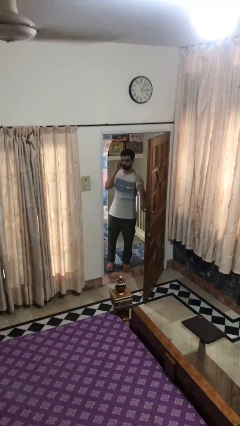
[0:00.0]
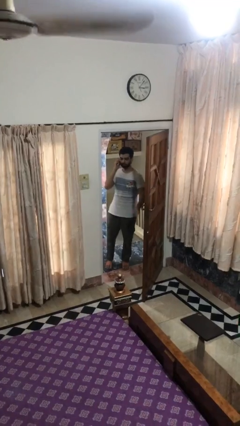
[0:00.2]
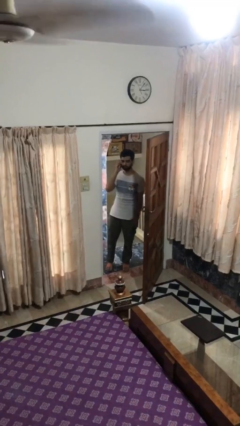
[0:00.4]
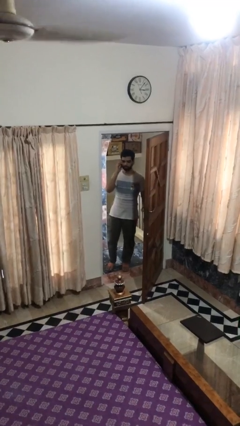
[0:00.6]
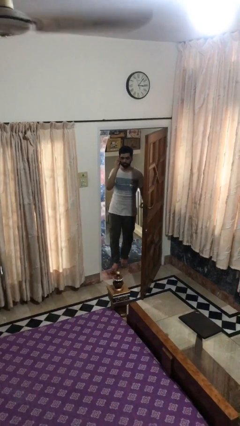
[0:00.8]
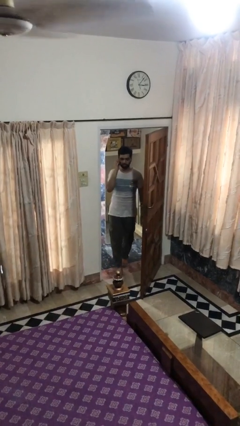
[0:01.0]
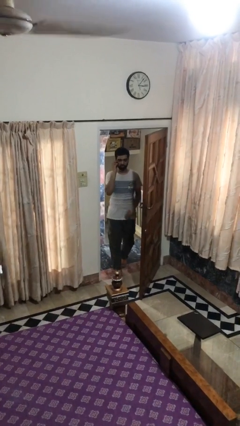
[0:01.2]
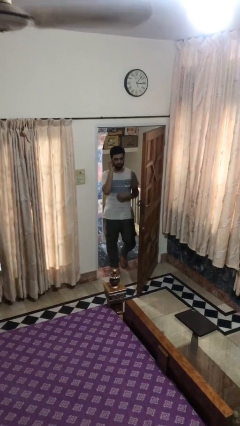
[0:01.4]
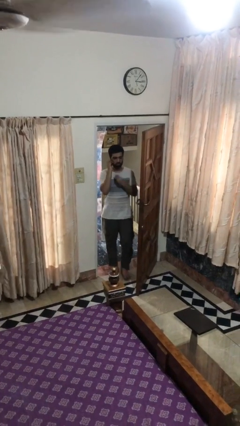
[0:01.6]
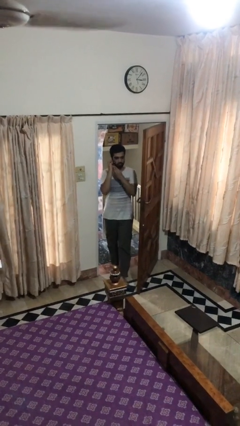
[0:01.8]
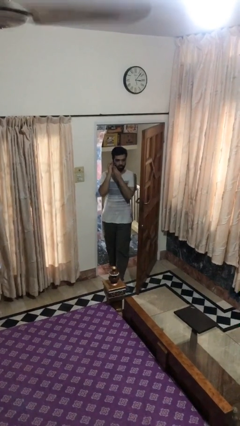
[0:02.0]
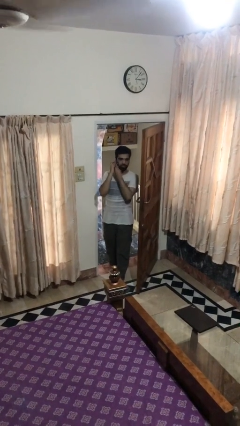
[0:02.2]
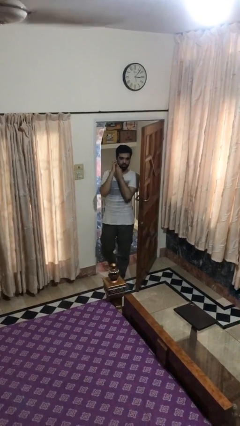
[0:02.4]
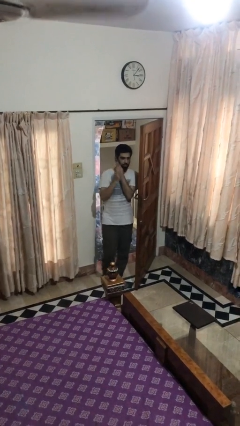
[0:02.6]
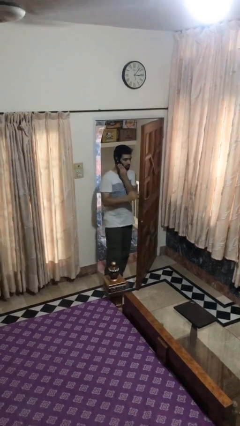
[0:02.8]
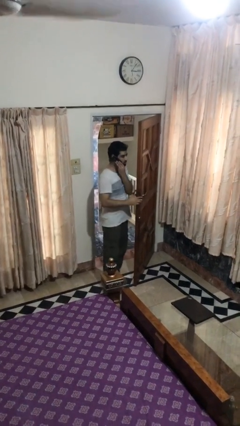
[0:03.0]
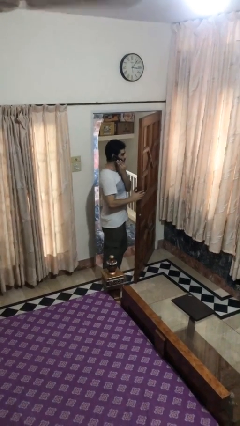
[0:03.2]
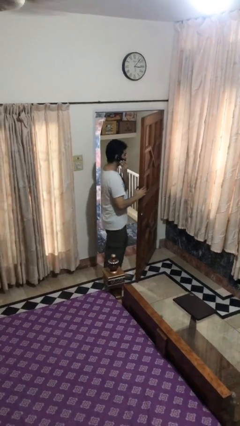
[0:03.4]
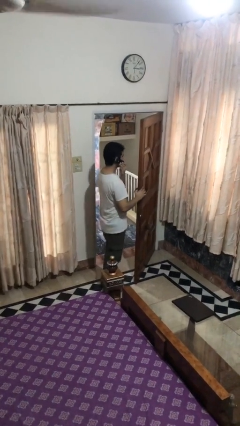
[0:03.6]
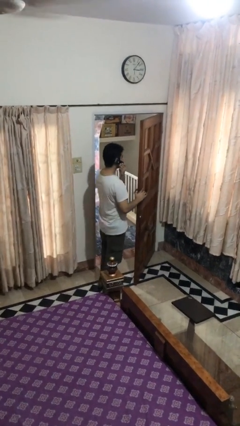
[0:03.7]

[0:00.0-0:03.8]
person enters scene through structure

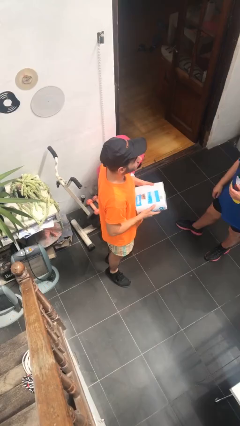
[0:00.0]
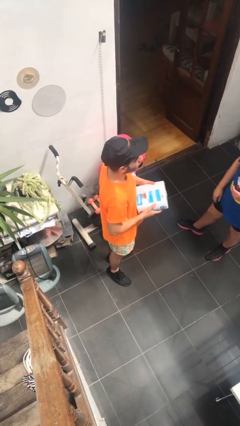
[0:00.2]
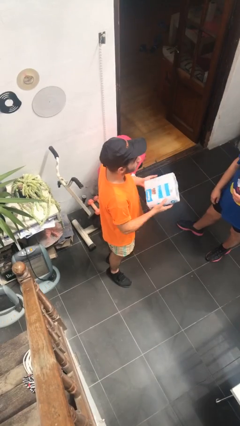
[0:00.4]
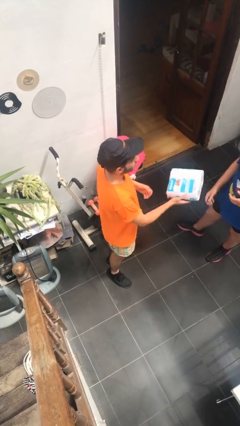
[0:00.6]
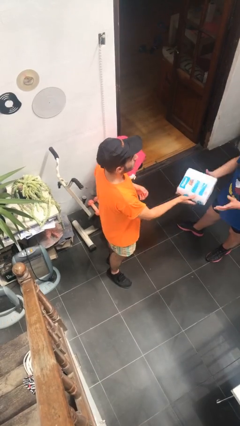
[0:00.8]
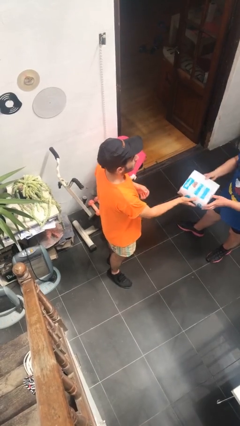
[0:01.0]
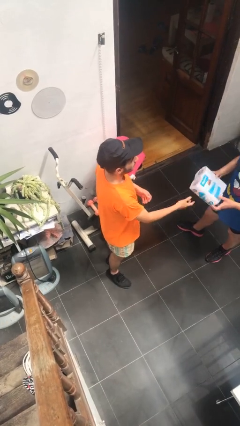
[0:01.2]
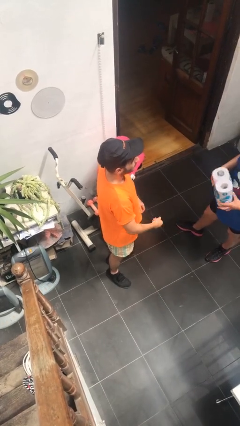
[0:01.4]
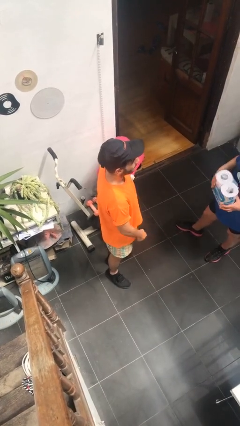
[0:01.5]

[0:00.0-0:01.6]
person transfers object to person

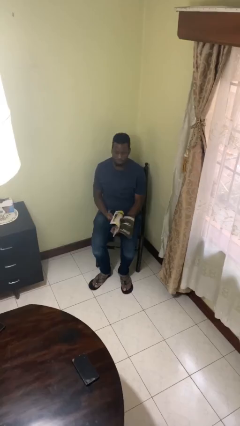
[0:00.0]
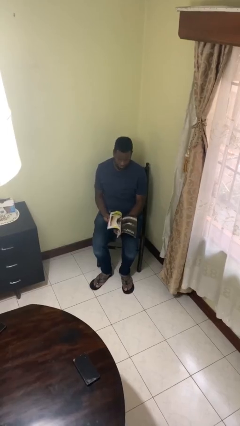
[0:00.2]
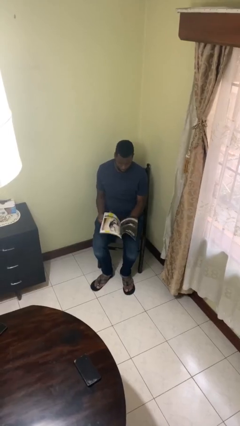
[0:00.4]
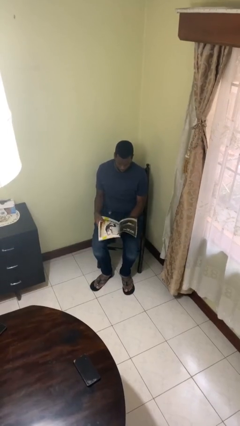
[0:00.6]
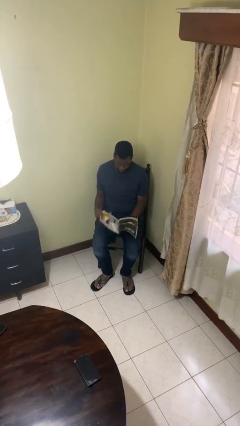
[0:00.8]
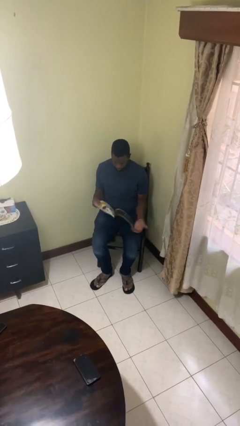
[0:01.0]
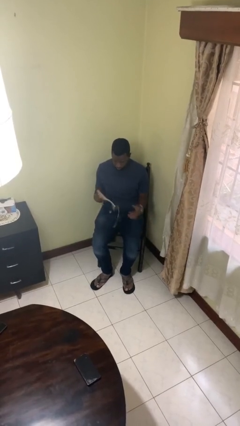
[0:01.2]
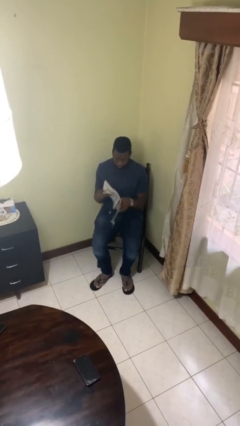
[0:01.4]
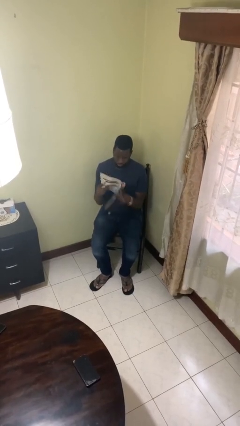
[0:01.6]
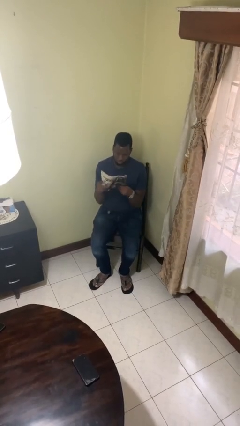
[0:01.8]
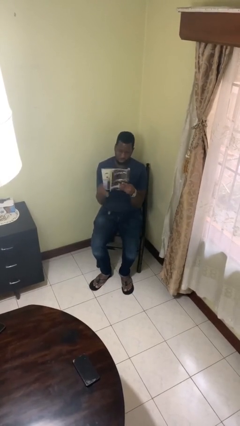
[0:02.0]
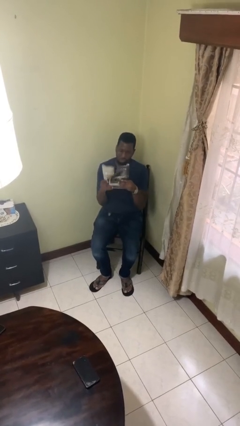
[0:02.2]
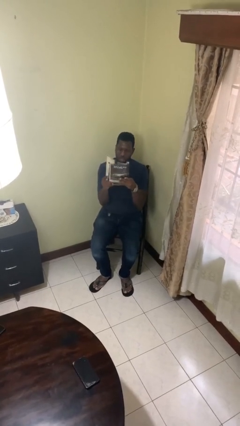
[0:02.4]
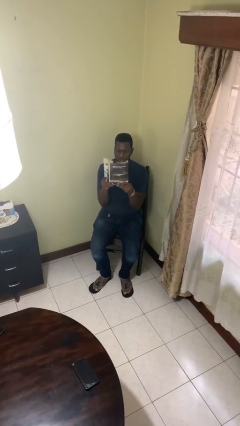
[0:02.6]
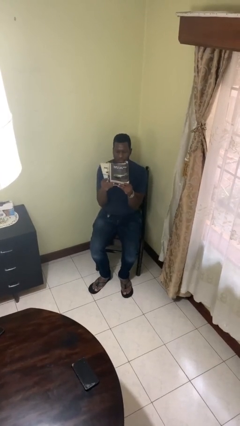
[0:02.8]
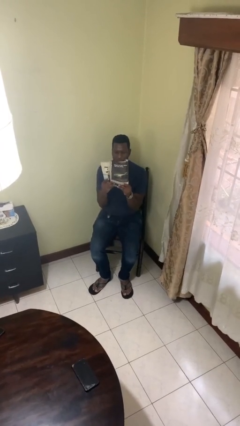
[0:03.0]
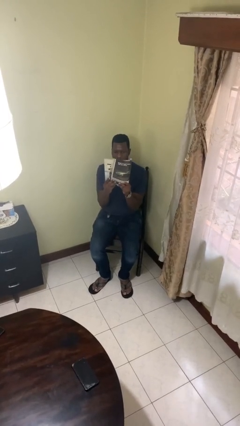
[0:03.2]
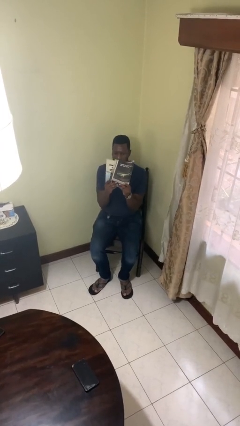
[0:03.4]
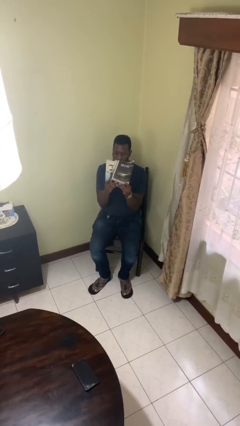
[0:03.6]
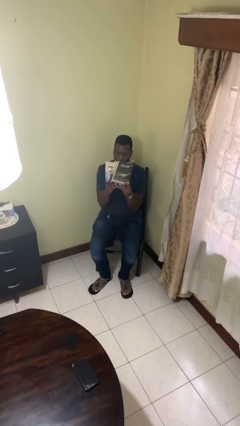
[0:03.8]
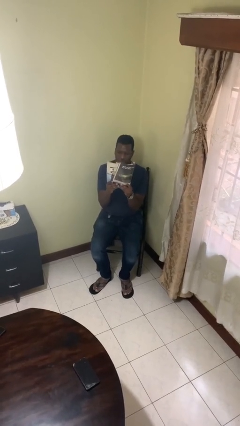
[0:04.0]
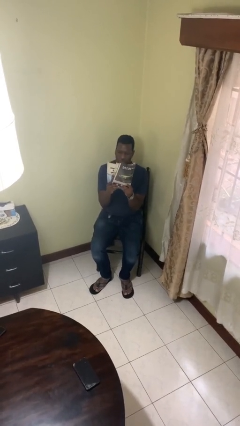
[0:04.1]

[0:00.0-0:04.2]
person reads document

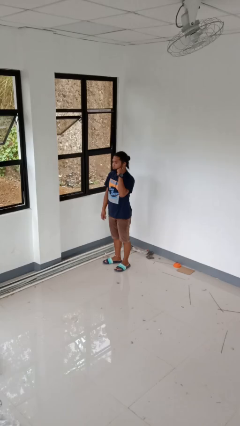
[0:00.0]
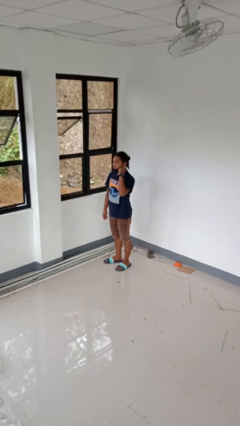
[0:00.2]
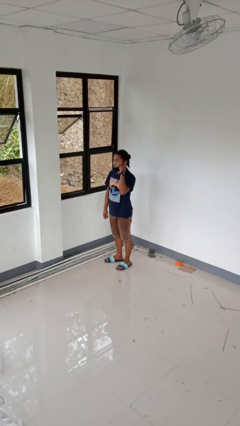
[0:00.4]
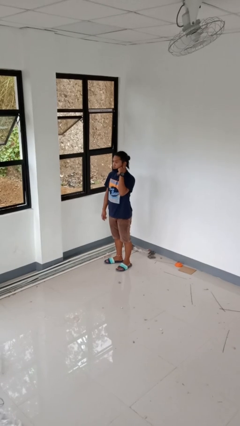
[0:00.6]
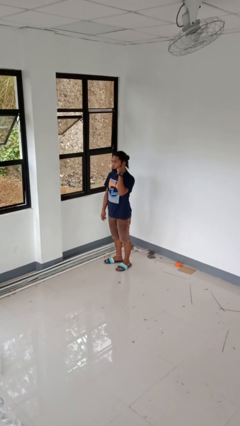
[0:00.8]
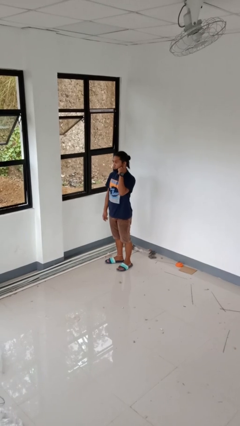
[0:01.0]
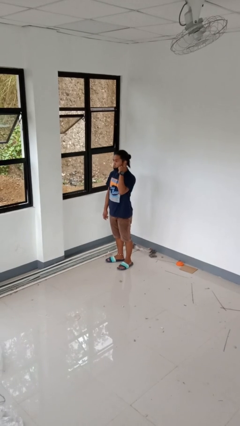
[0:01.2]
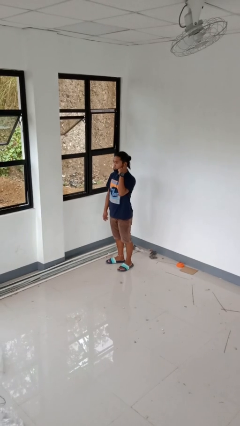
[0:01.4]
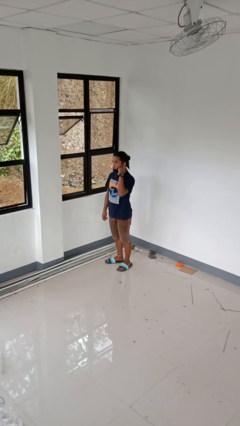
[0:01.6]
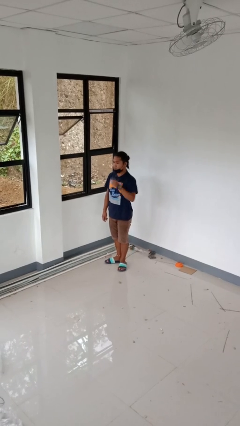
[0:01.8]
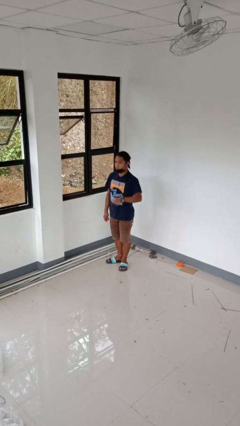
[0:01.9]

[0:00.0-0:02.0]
person gestures listen closely

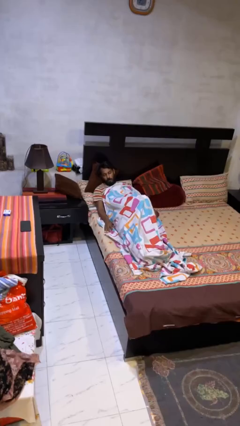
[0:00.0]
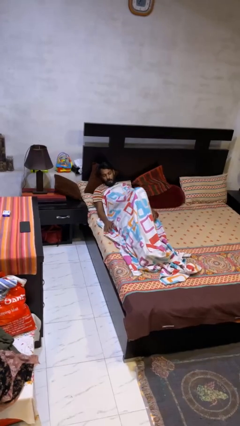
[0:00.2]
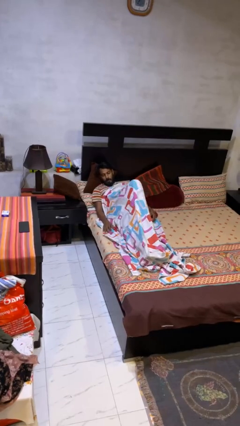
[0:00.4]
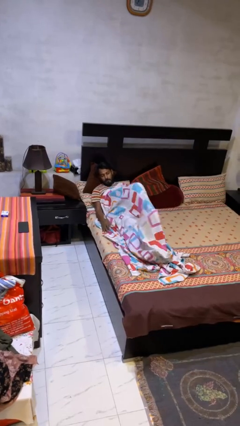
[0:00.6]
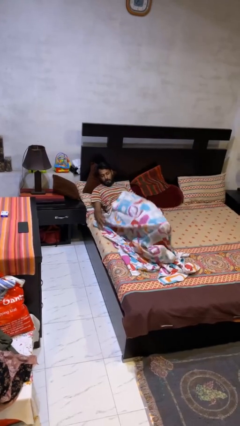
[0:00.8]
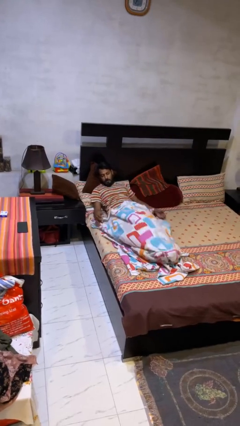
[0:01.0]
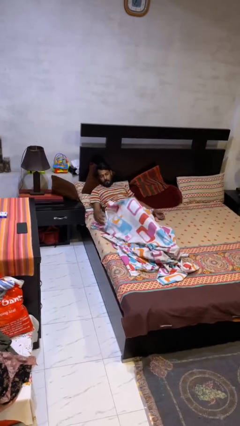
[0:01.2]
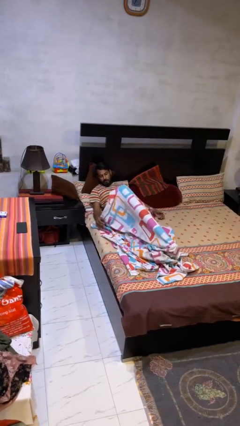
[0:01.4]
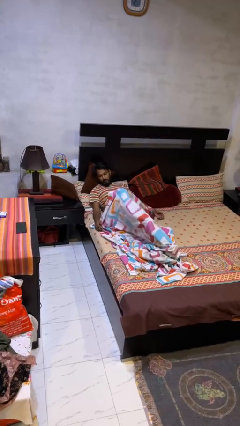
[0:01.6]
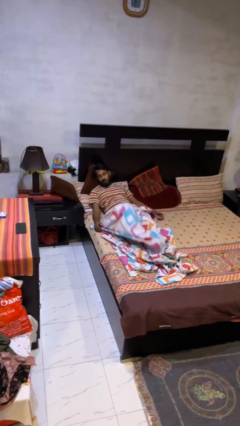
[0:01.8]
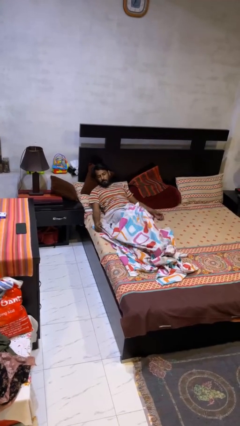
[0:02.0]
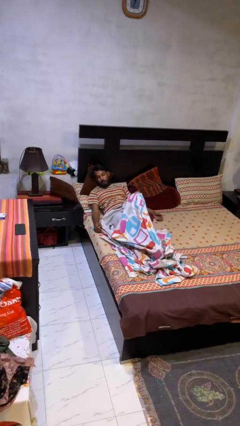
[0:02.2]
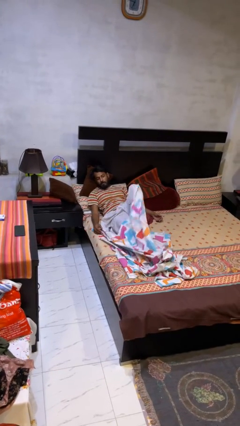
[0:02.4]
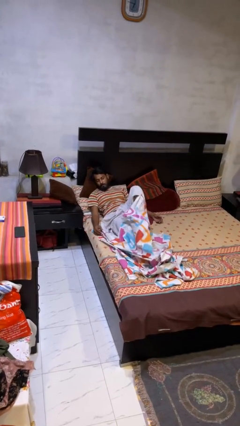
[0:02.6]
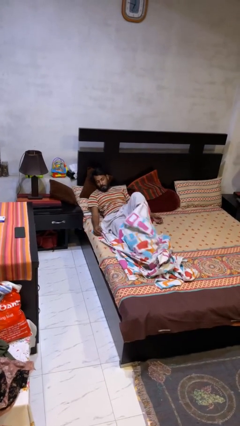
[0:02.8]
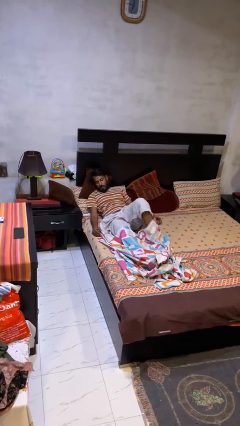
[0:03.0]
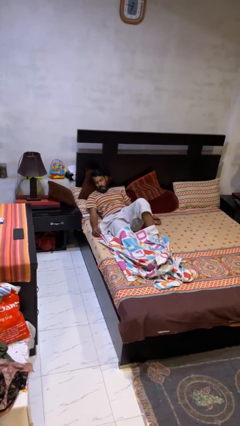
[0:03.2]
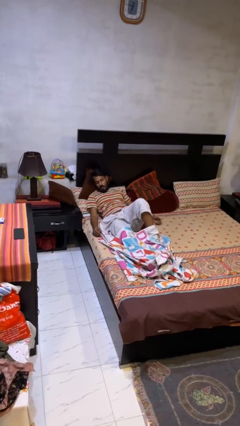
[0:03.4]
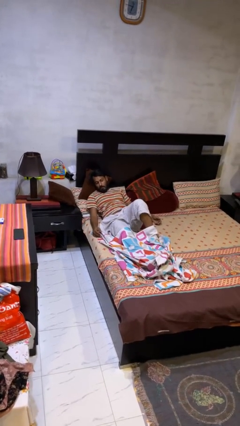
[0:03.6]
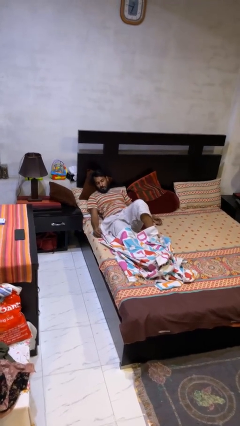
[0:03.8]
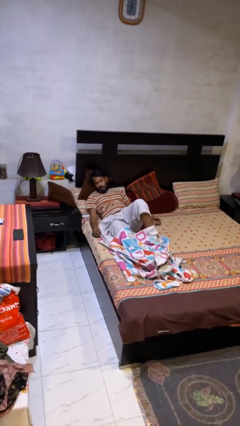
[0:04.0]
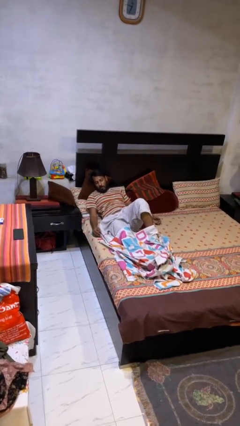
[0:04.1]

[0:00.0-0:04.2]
person uncovers with bedsheets

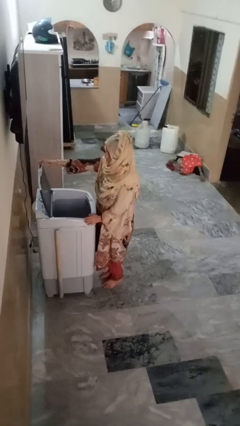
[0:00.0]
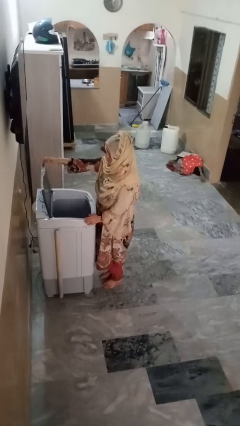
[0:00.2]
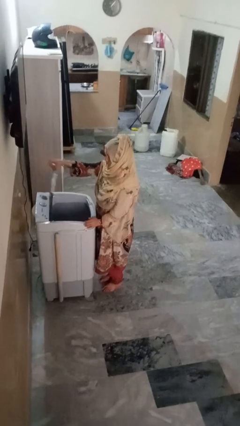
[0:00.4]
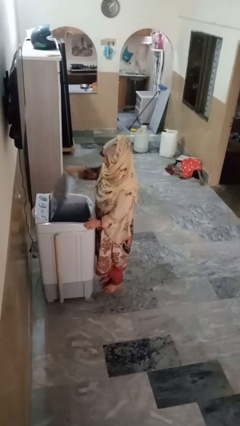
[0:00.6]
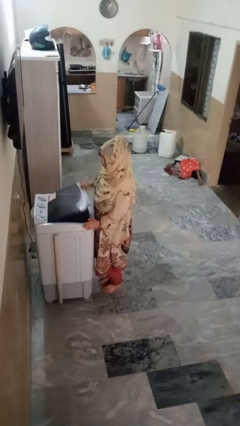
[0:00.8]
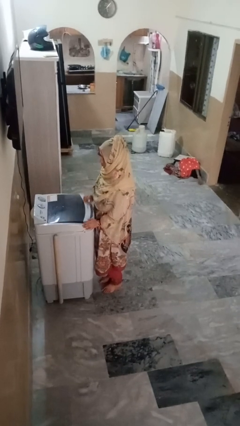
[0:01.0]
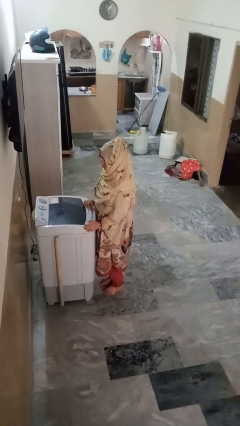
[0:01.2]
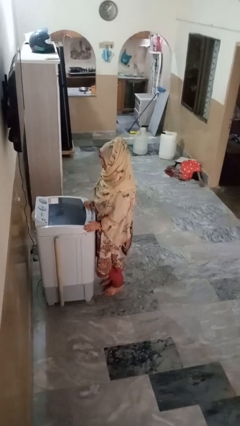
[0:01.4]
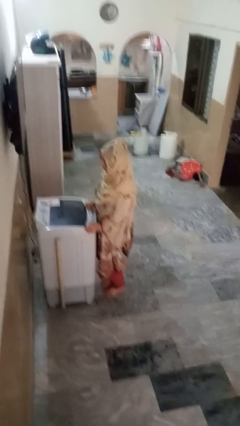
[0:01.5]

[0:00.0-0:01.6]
person closes clothes washer
